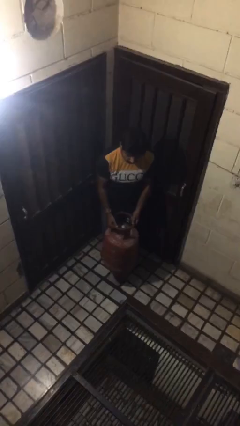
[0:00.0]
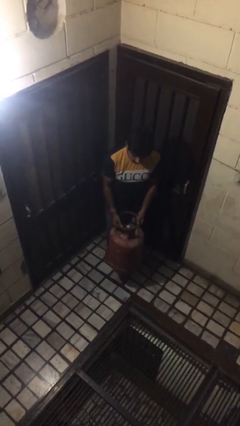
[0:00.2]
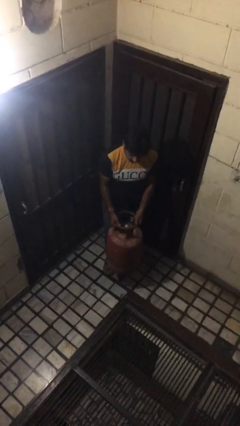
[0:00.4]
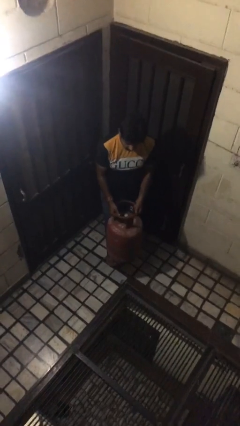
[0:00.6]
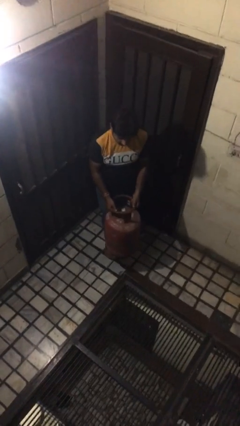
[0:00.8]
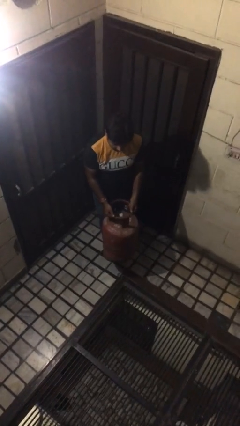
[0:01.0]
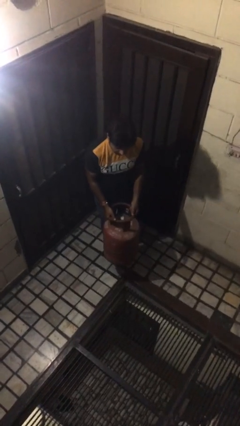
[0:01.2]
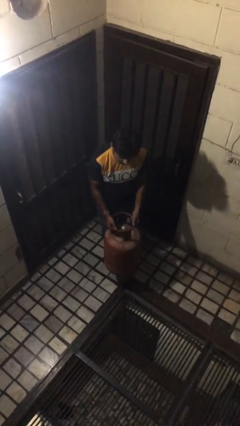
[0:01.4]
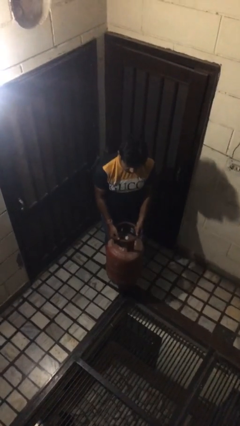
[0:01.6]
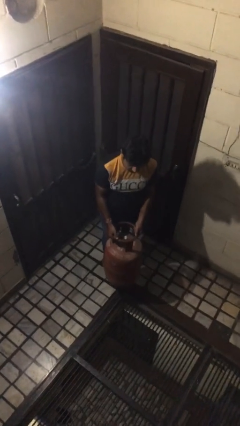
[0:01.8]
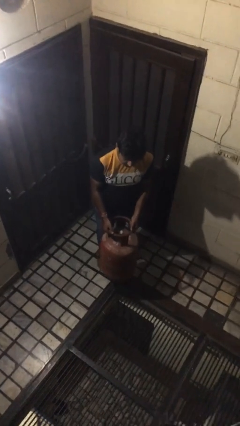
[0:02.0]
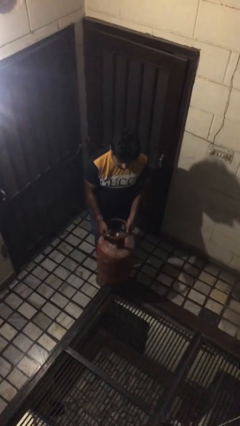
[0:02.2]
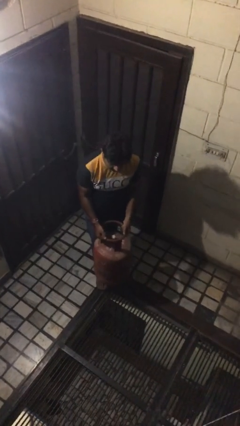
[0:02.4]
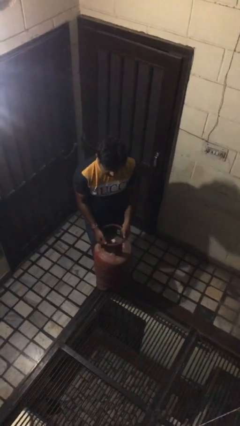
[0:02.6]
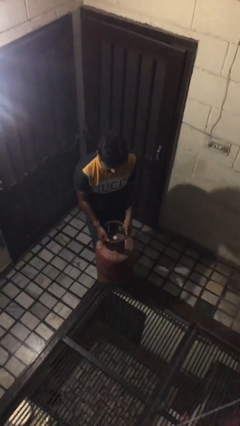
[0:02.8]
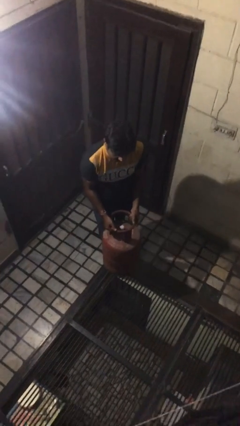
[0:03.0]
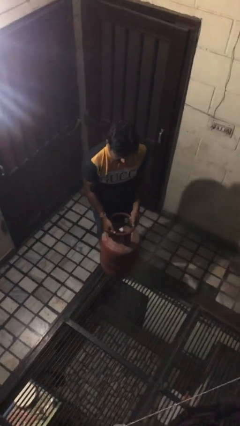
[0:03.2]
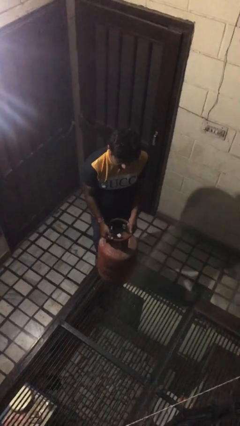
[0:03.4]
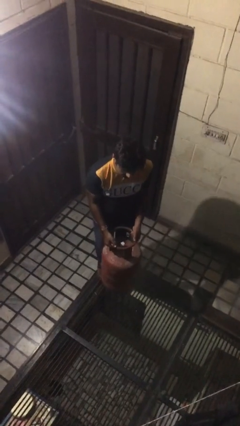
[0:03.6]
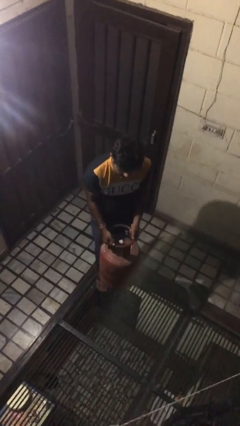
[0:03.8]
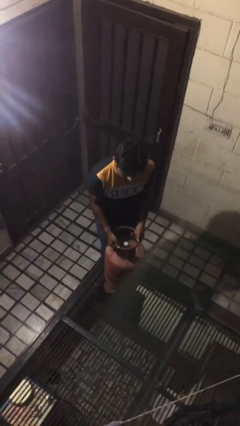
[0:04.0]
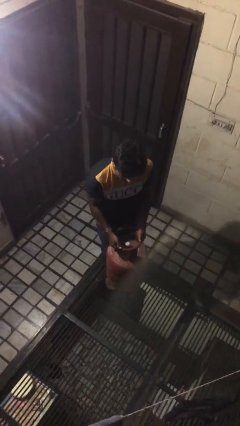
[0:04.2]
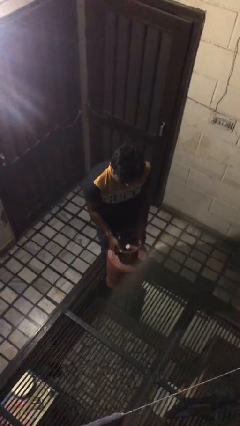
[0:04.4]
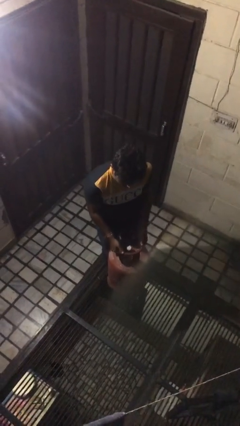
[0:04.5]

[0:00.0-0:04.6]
person carries heavy object

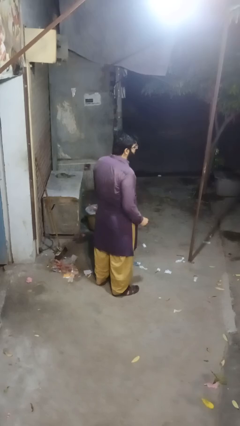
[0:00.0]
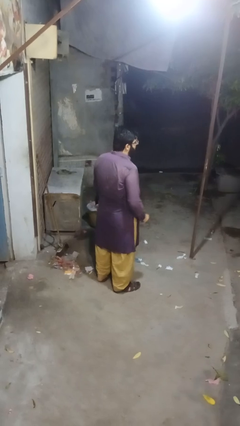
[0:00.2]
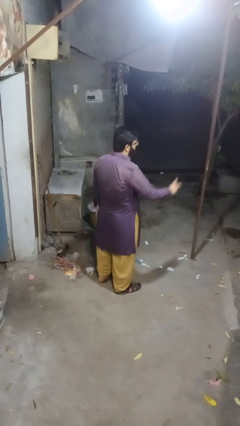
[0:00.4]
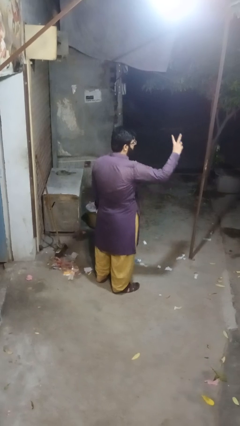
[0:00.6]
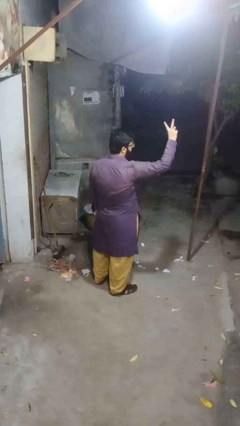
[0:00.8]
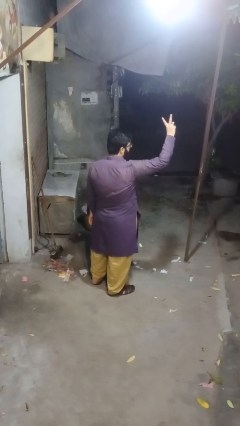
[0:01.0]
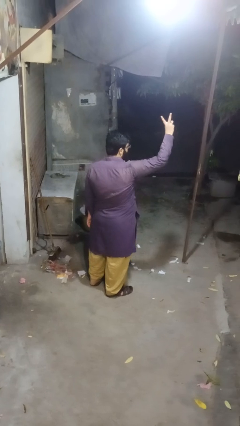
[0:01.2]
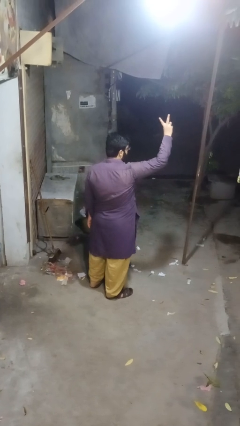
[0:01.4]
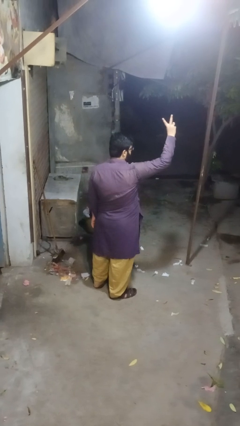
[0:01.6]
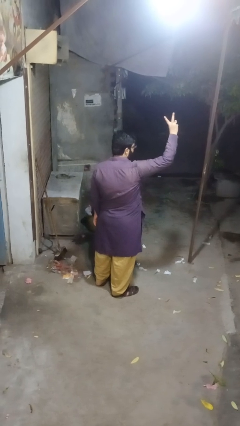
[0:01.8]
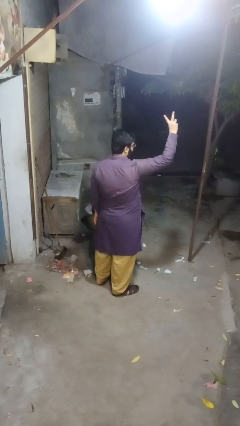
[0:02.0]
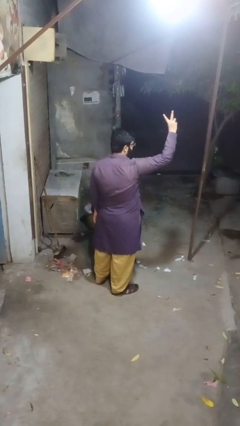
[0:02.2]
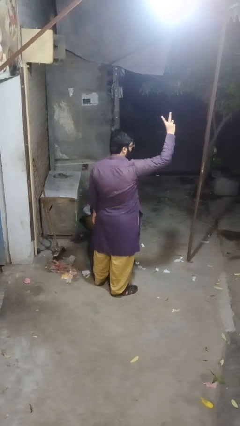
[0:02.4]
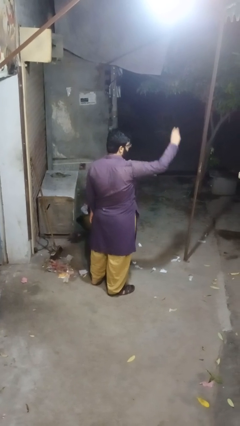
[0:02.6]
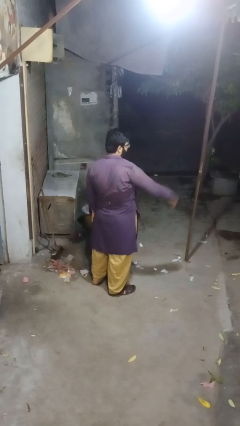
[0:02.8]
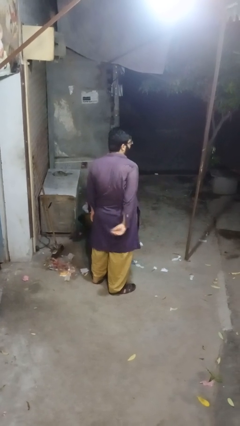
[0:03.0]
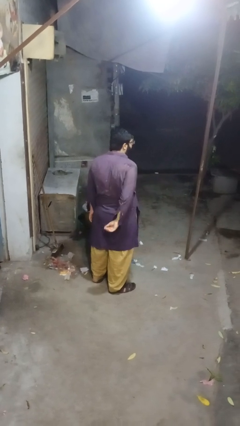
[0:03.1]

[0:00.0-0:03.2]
person gestures peace

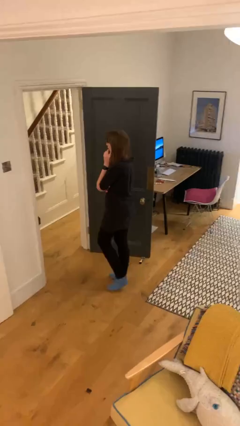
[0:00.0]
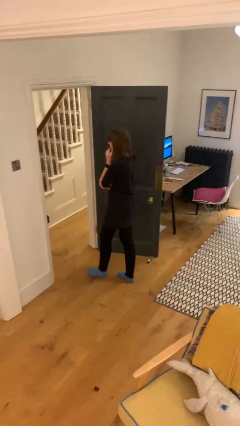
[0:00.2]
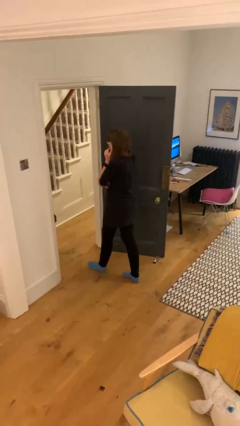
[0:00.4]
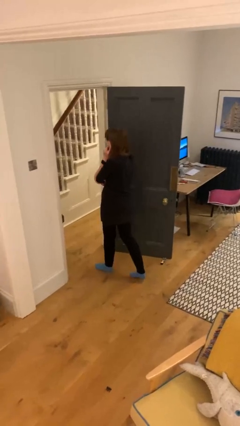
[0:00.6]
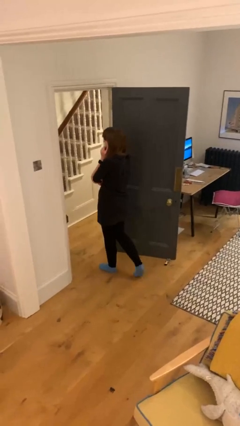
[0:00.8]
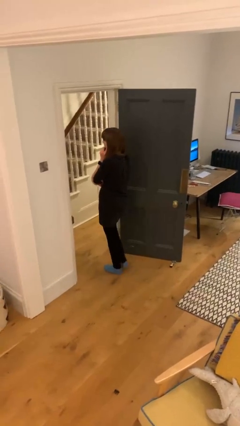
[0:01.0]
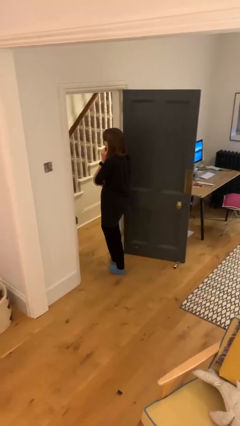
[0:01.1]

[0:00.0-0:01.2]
person exits scene through structure

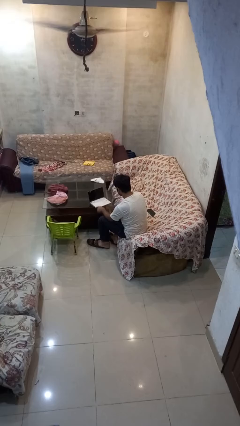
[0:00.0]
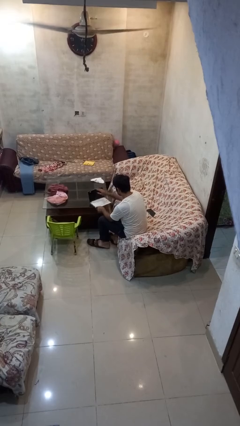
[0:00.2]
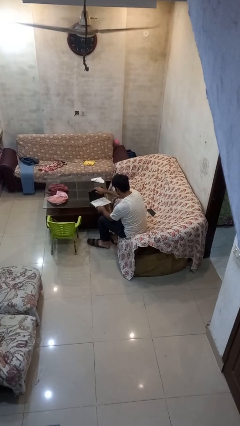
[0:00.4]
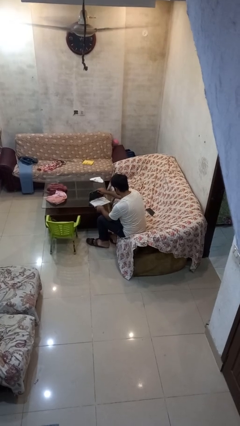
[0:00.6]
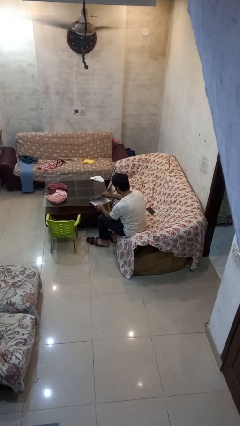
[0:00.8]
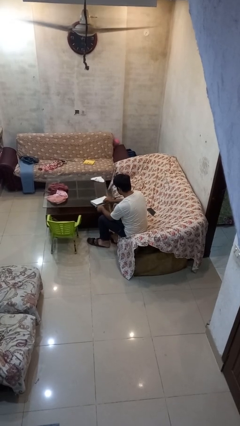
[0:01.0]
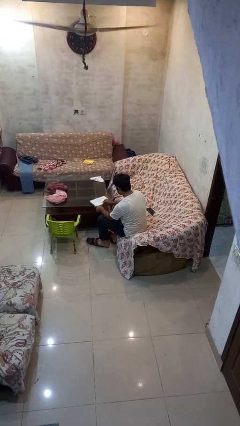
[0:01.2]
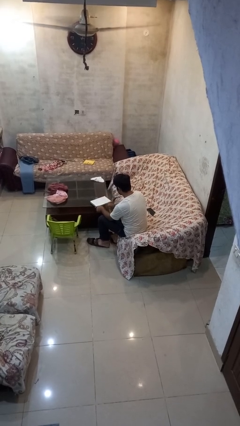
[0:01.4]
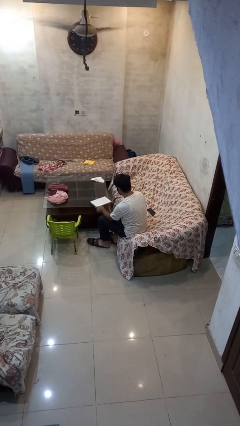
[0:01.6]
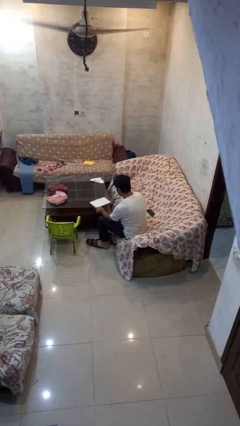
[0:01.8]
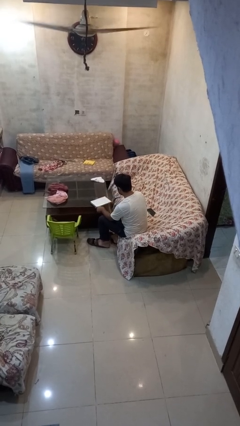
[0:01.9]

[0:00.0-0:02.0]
person closes laptop

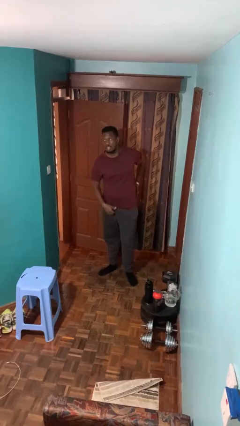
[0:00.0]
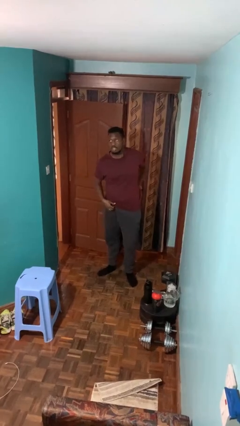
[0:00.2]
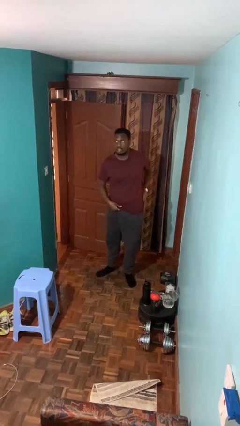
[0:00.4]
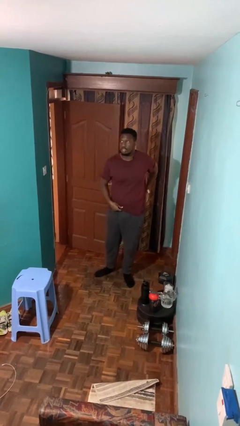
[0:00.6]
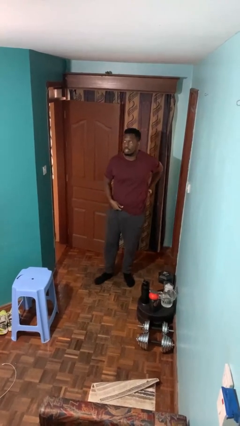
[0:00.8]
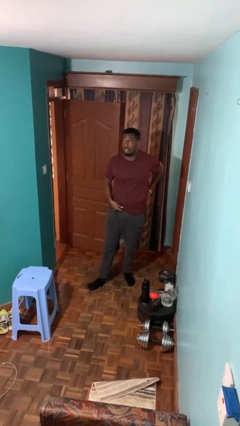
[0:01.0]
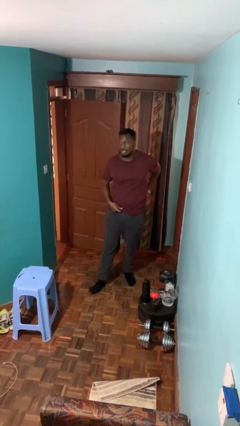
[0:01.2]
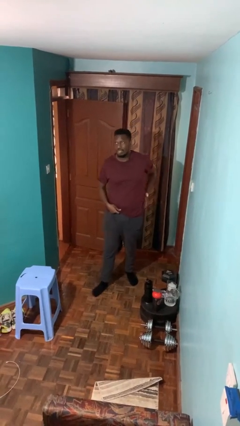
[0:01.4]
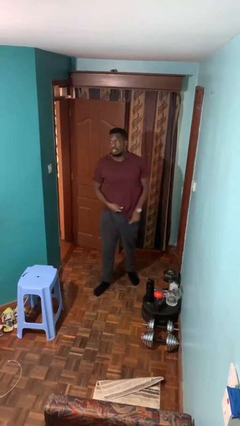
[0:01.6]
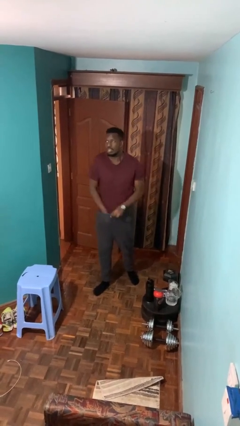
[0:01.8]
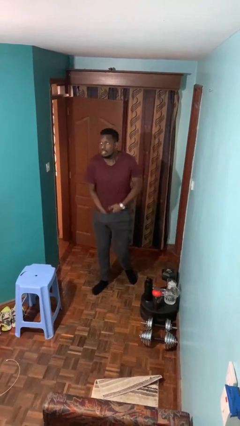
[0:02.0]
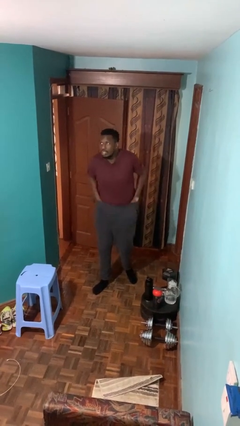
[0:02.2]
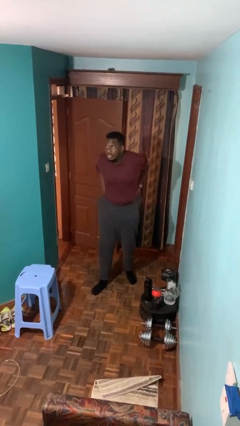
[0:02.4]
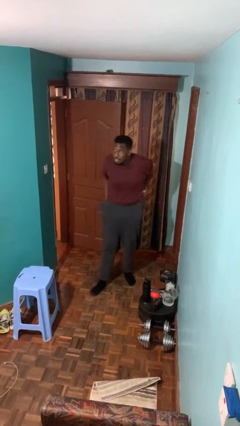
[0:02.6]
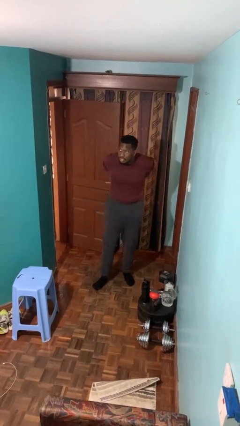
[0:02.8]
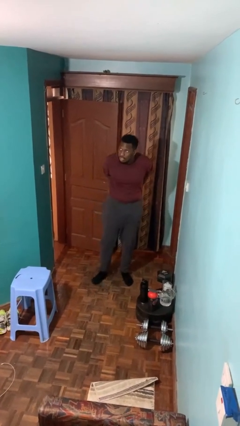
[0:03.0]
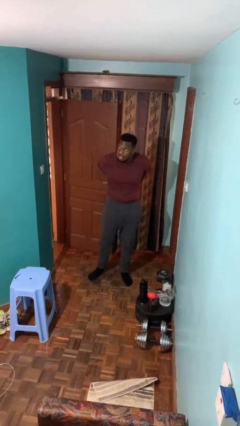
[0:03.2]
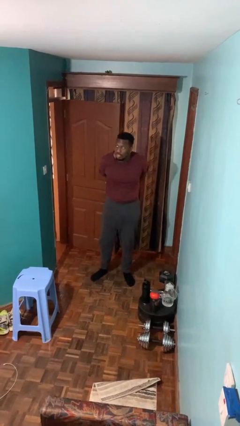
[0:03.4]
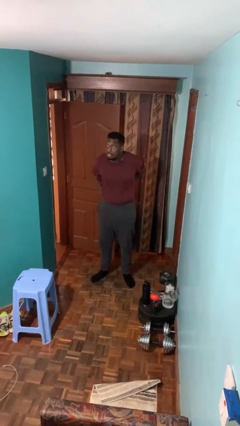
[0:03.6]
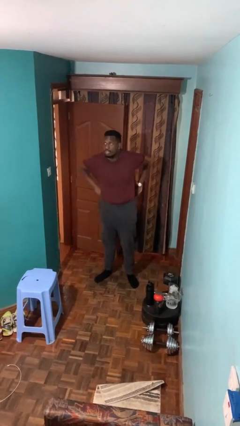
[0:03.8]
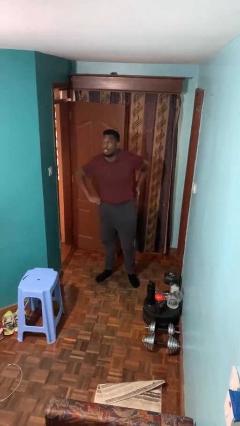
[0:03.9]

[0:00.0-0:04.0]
person tucks in shirt

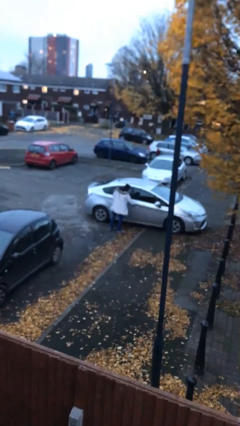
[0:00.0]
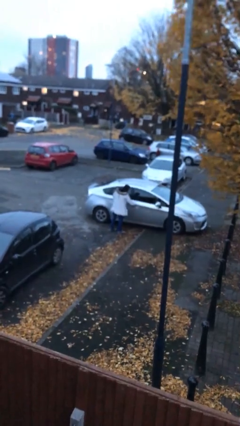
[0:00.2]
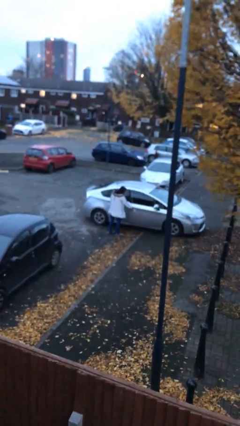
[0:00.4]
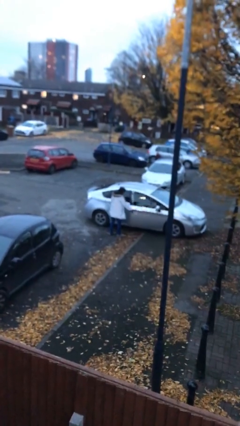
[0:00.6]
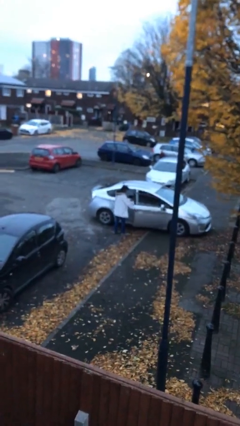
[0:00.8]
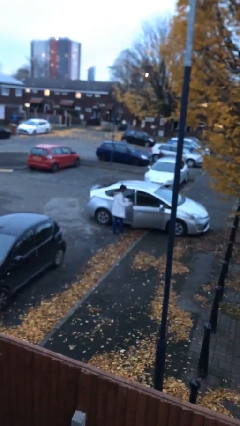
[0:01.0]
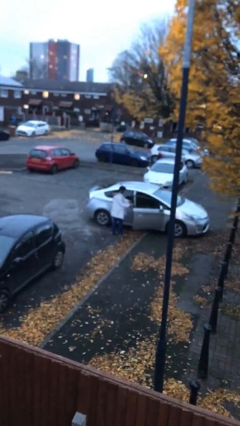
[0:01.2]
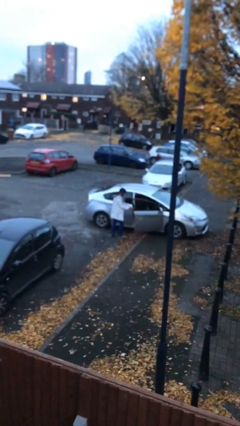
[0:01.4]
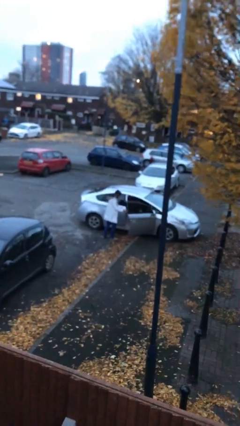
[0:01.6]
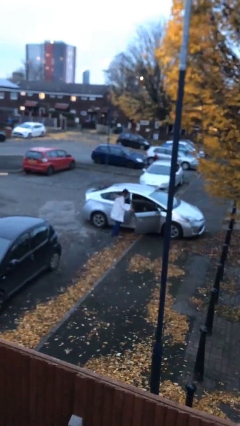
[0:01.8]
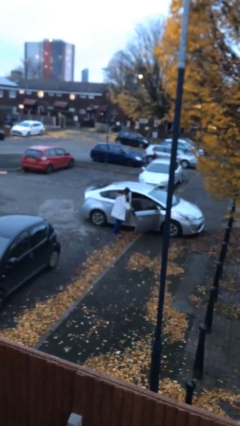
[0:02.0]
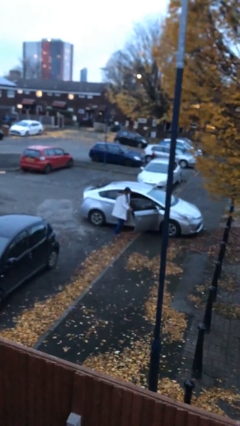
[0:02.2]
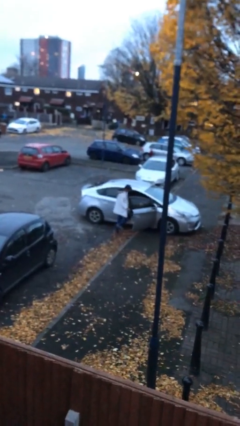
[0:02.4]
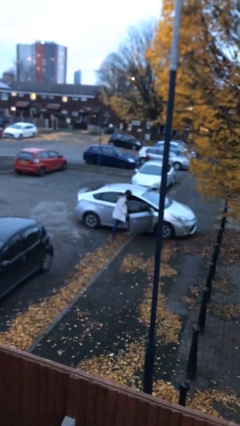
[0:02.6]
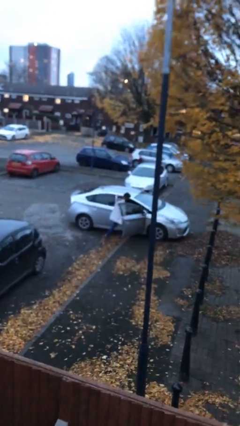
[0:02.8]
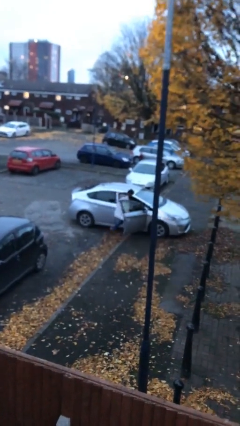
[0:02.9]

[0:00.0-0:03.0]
person opens car door
